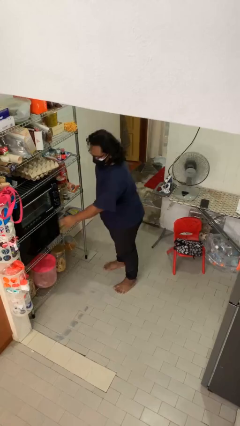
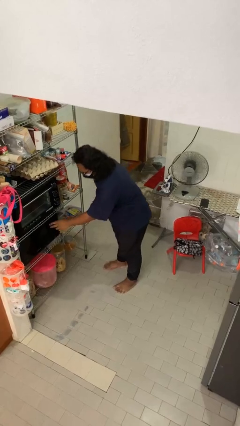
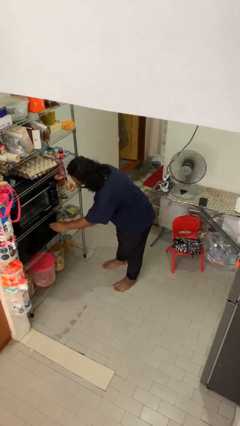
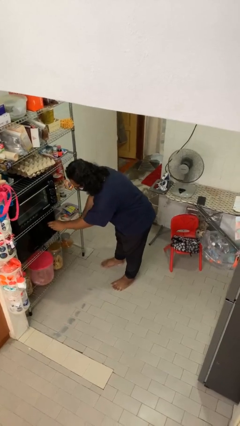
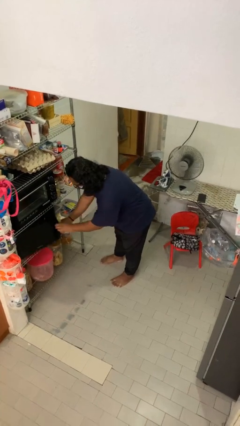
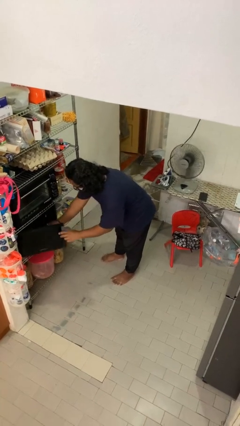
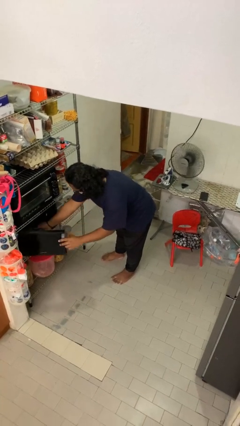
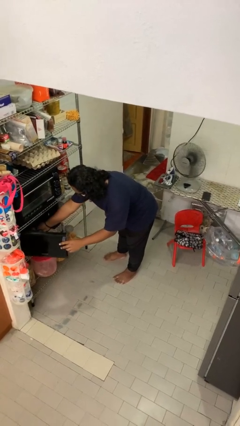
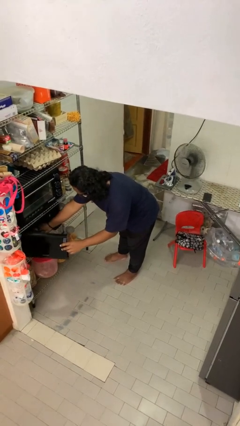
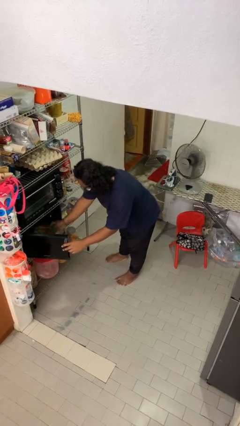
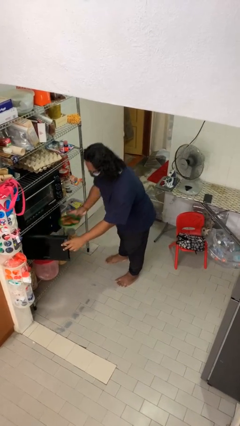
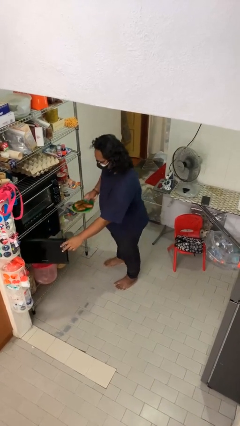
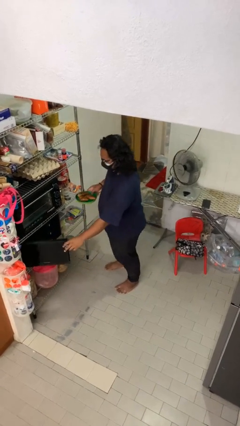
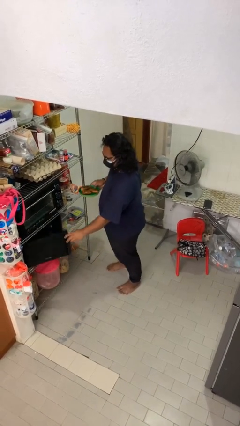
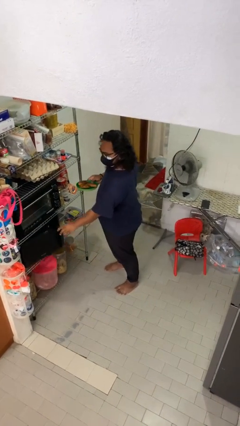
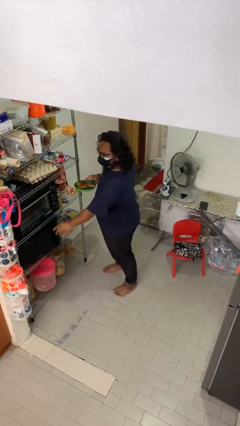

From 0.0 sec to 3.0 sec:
person takes object from microwave

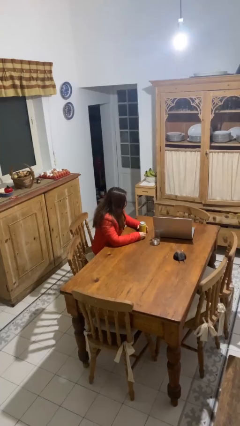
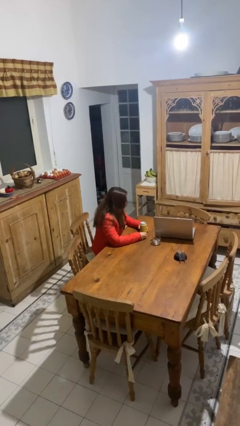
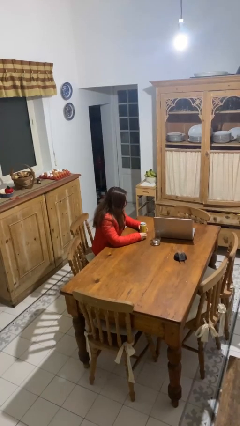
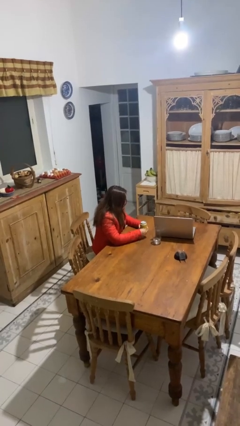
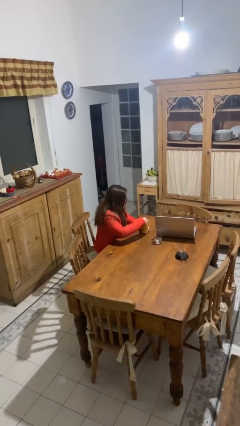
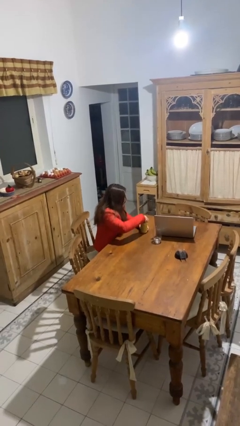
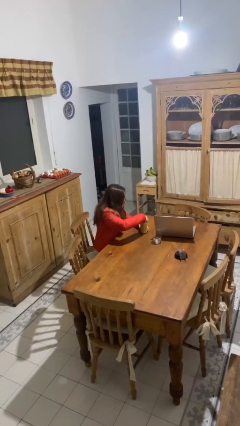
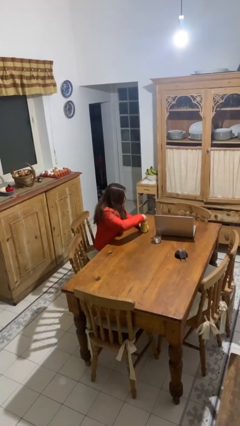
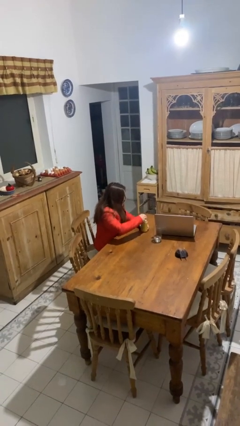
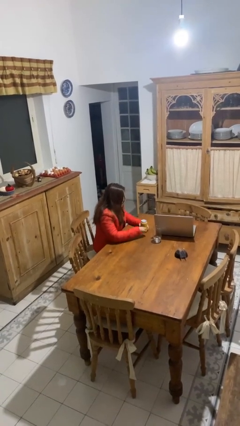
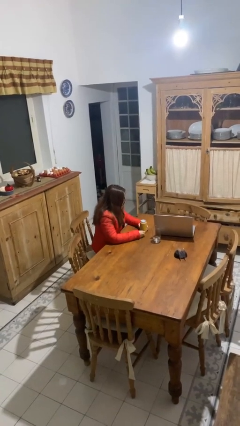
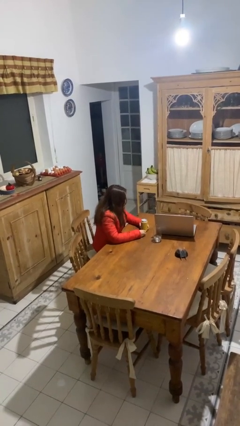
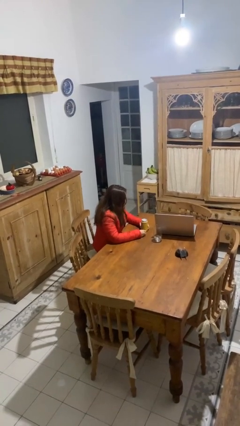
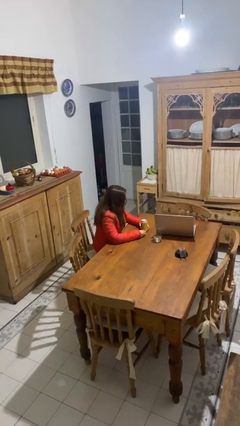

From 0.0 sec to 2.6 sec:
person opens beverage can

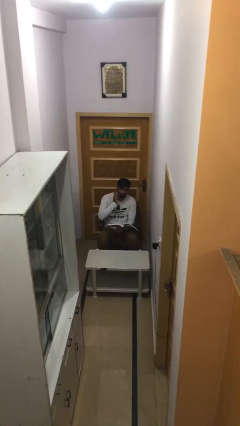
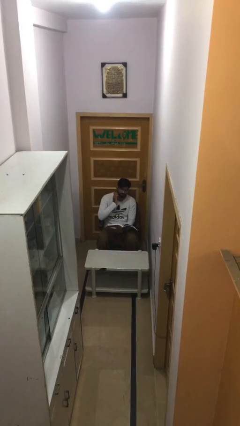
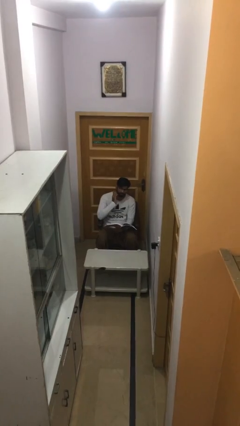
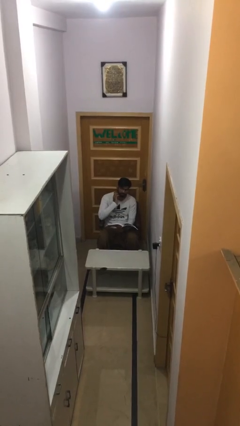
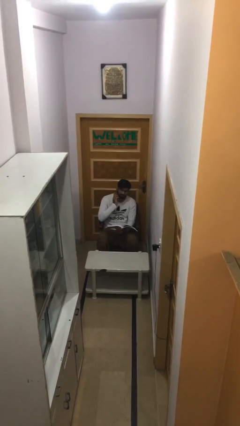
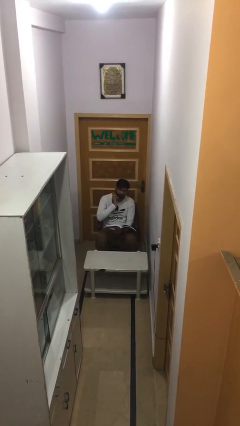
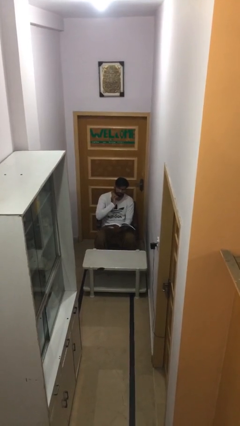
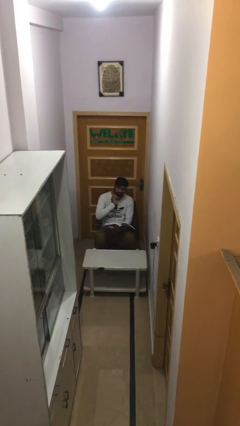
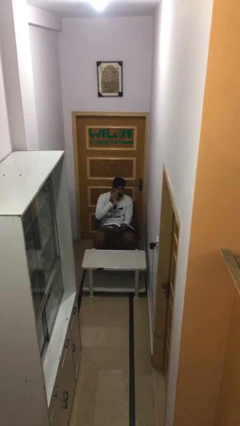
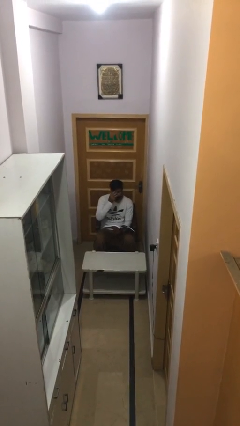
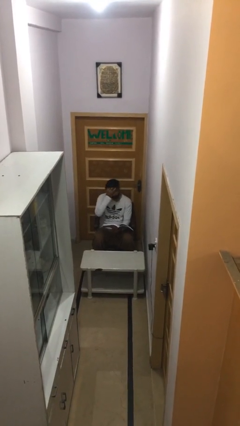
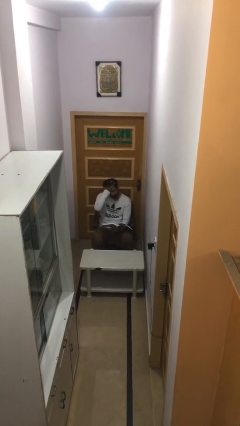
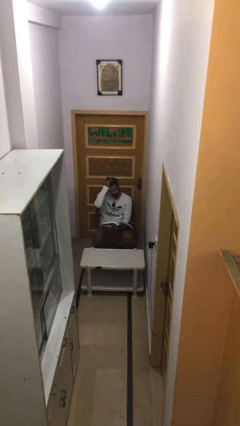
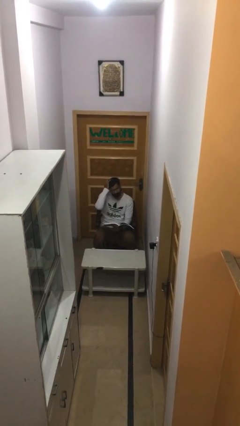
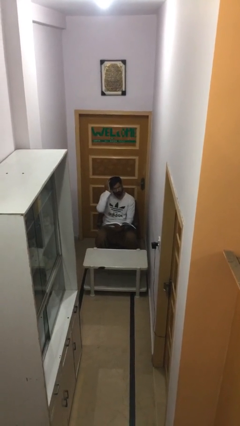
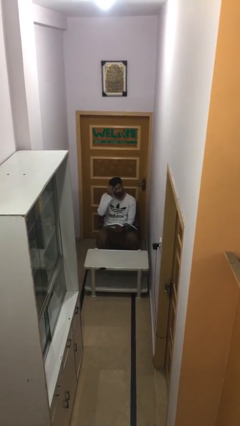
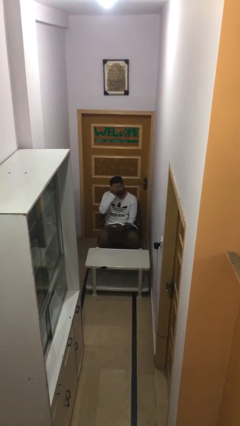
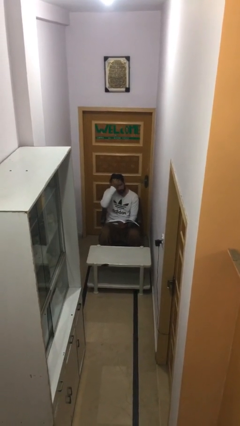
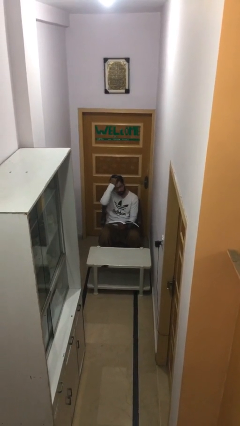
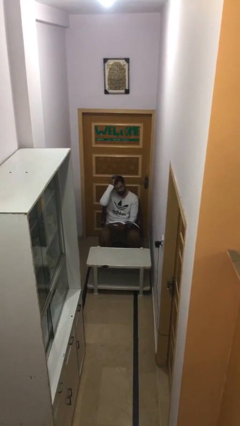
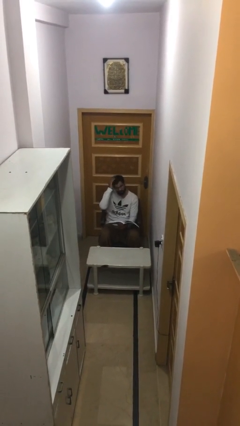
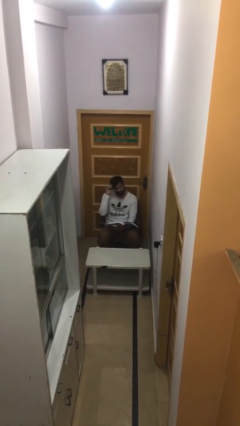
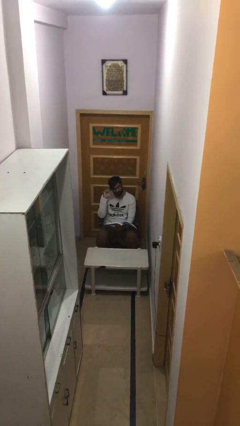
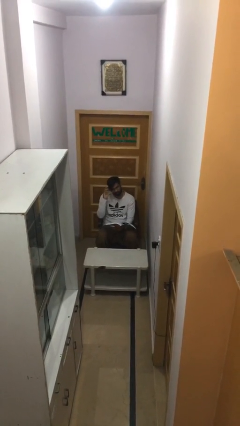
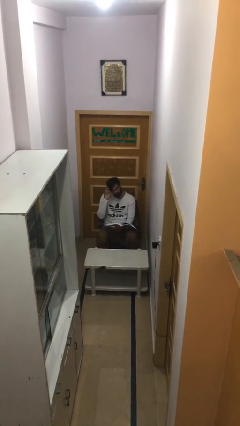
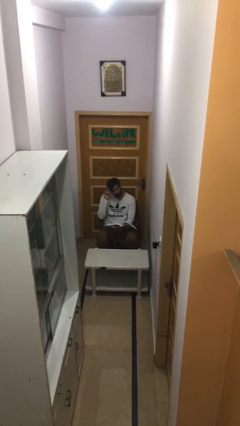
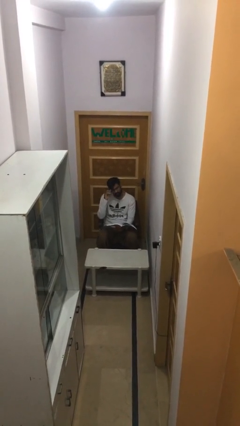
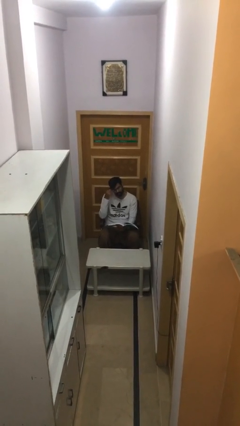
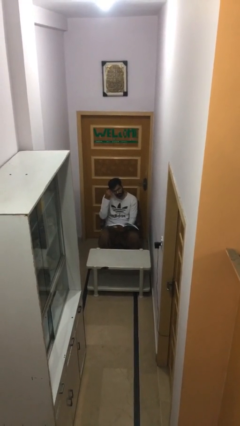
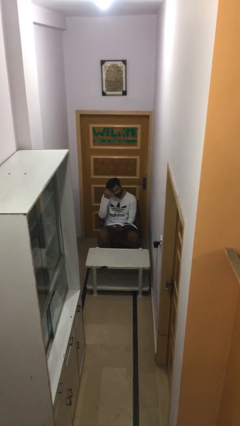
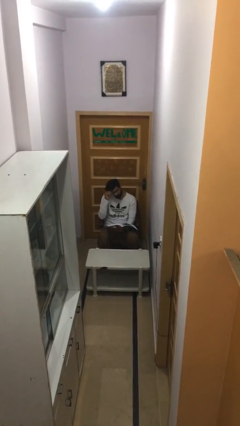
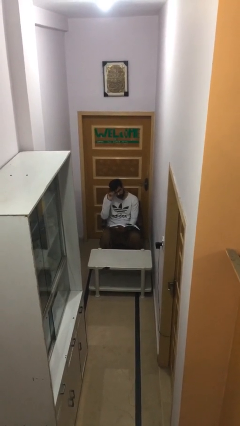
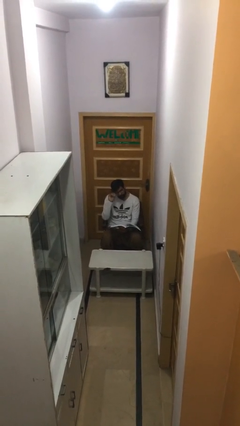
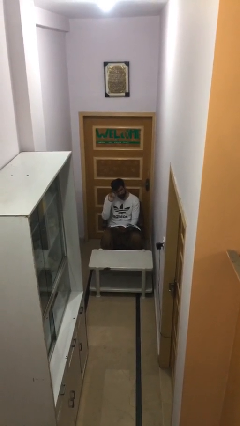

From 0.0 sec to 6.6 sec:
person reads document

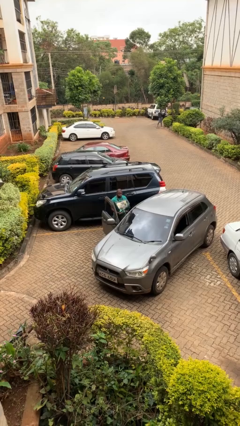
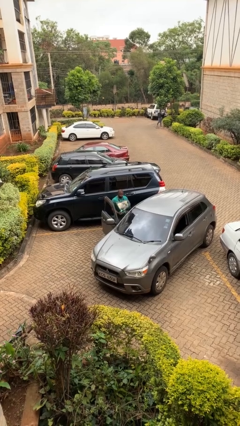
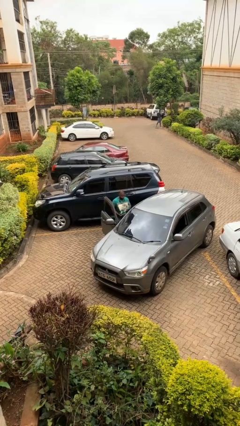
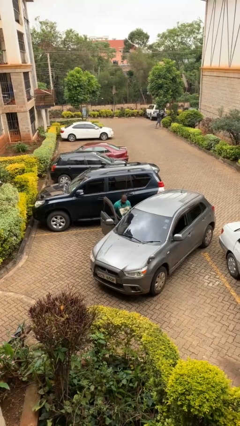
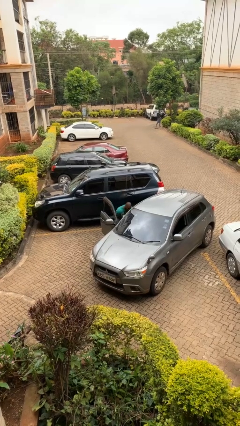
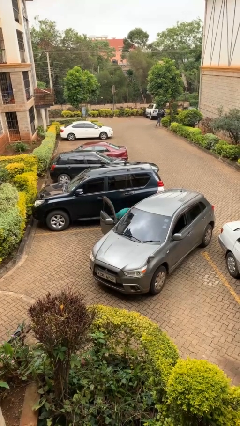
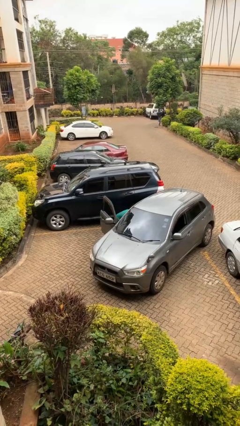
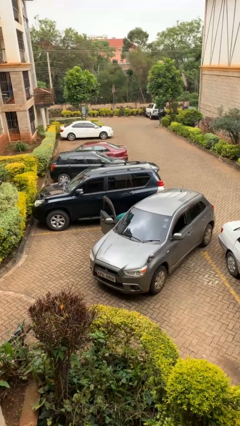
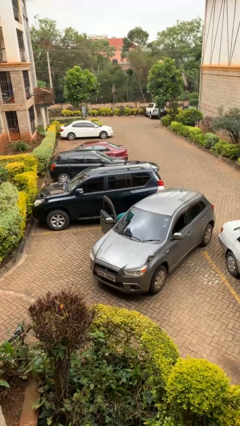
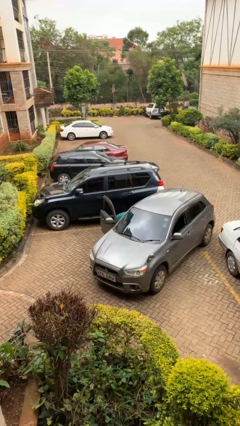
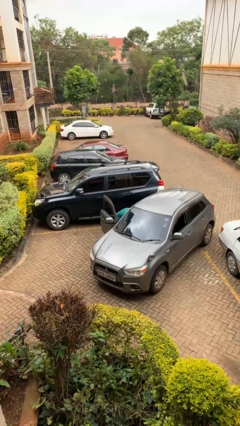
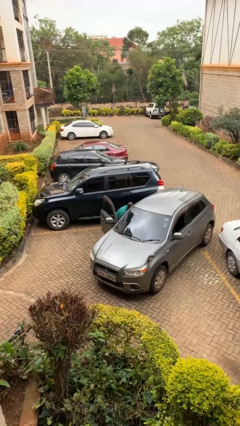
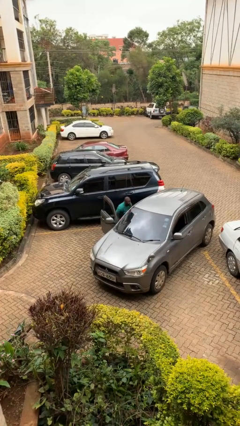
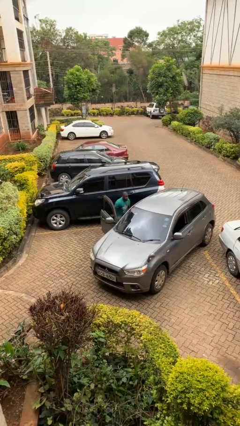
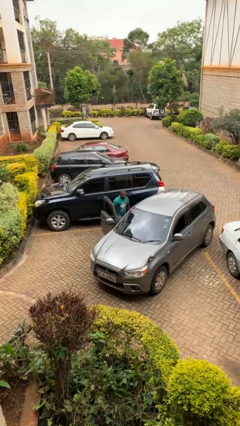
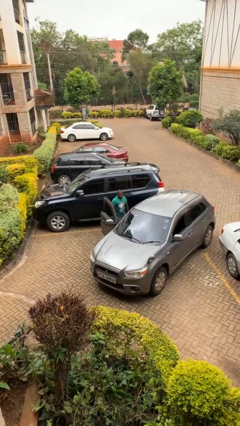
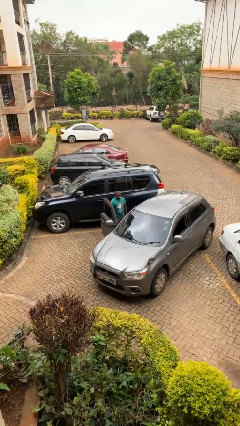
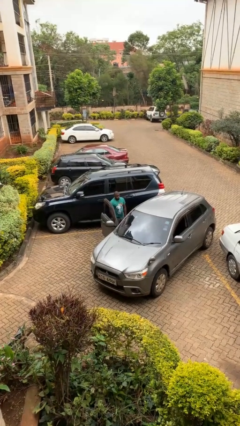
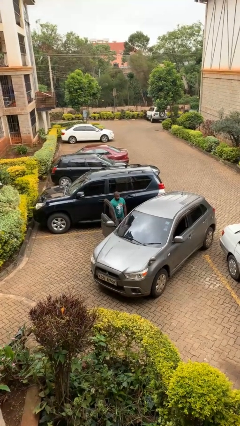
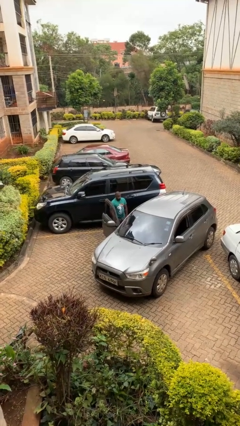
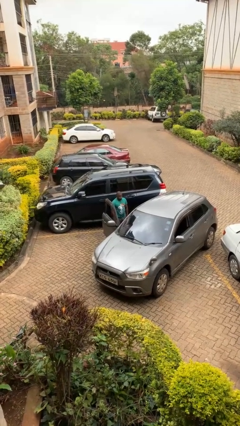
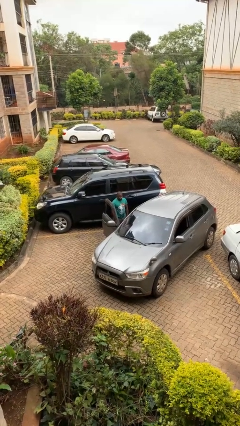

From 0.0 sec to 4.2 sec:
person loads car

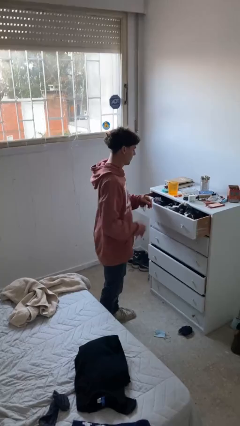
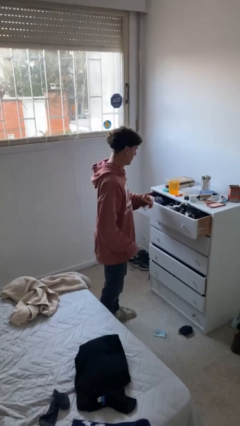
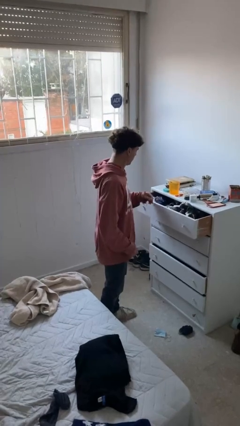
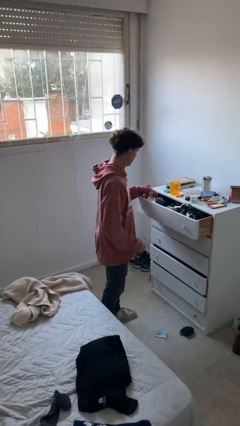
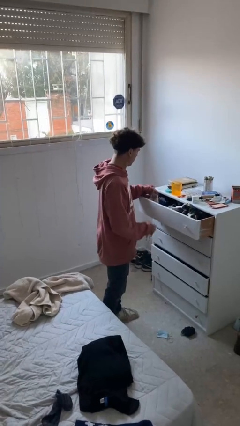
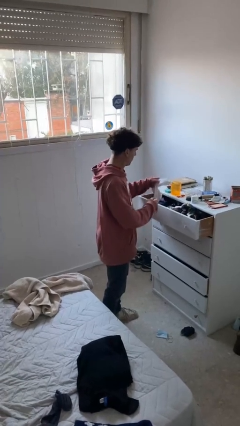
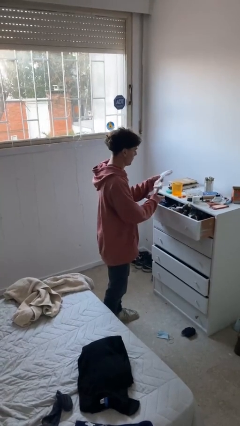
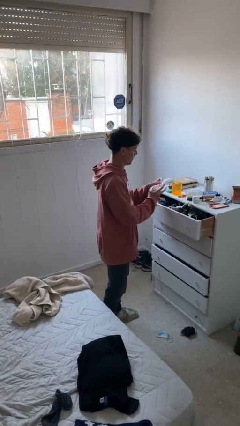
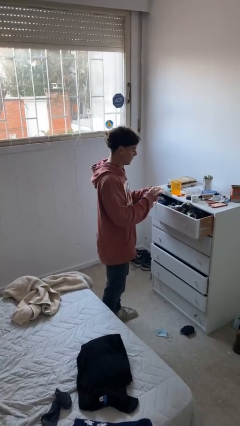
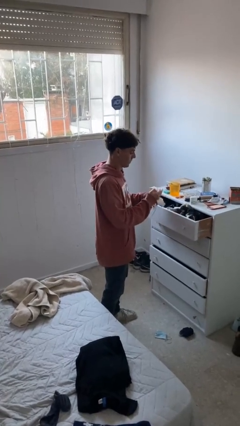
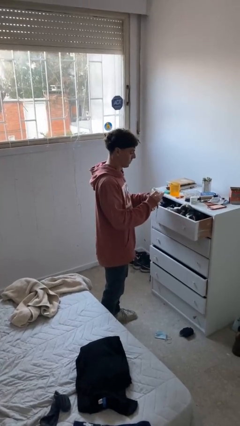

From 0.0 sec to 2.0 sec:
person takes clothes from dresser
